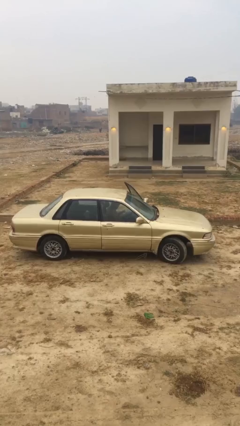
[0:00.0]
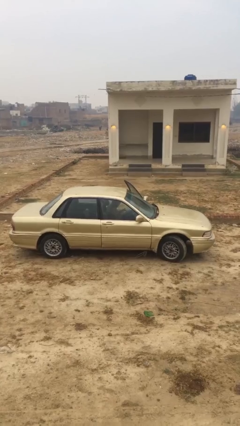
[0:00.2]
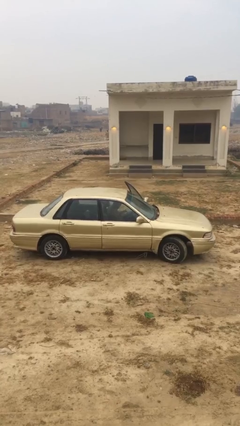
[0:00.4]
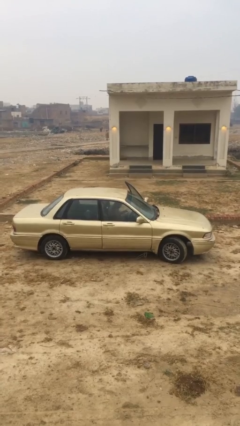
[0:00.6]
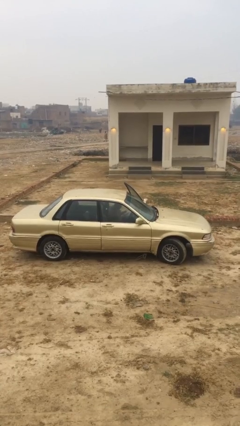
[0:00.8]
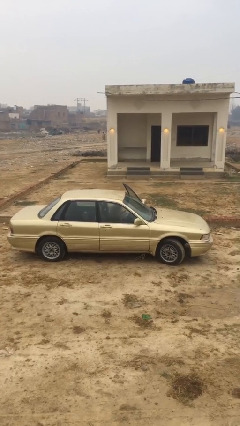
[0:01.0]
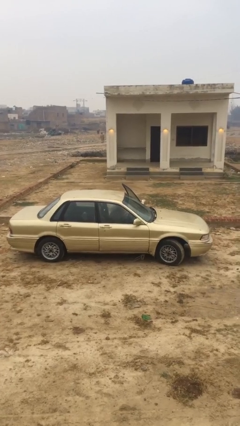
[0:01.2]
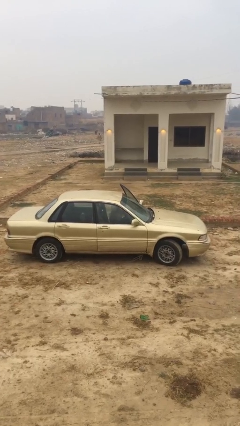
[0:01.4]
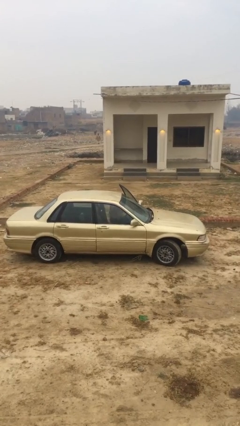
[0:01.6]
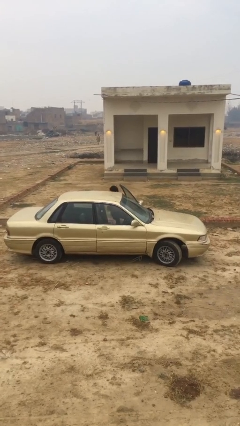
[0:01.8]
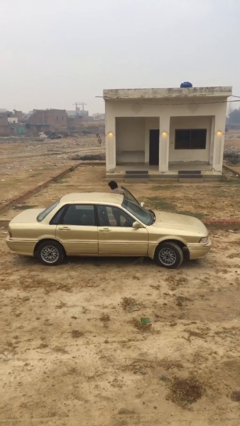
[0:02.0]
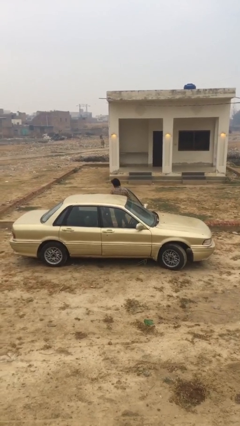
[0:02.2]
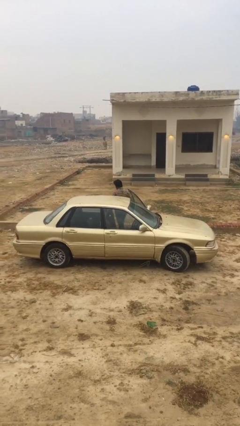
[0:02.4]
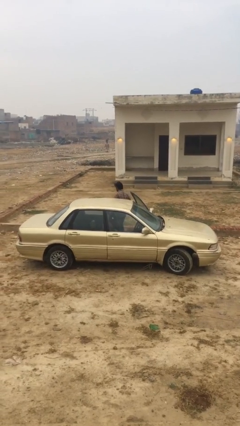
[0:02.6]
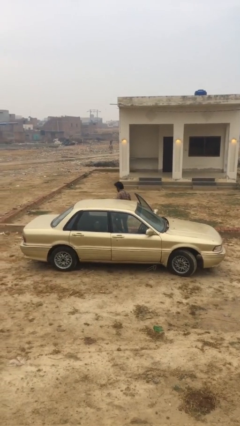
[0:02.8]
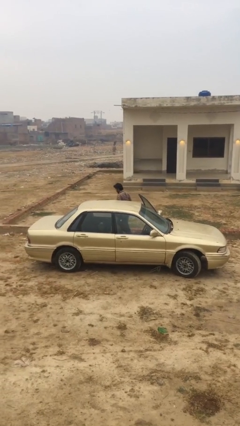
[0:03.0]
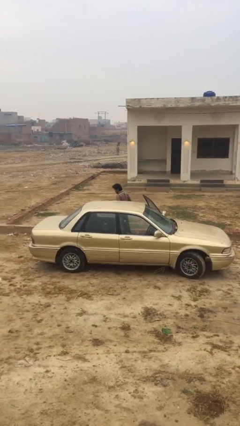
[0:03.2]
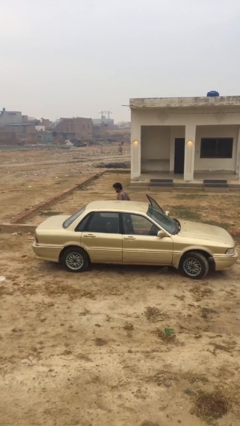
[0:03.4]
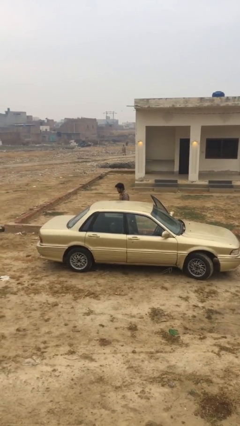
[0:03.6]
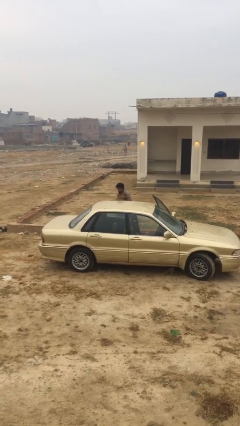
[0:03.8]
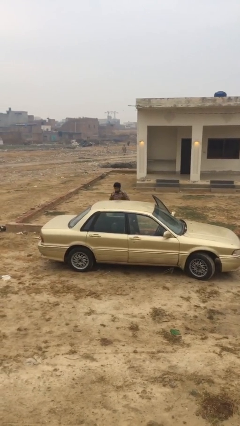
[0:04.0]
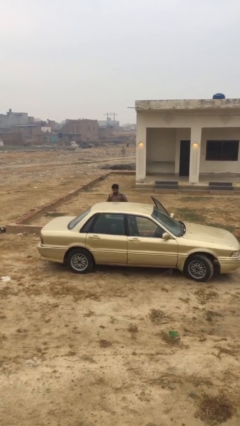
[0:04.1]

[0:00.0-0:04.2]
person exits car

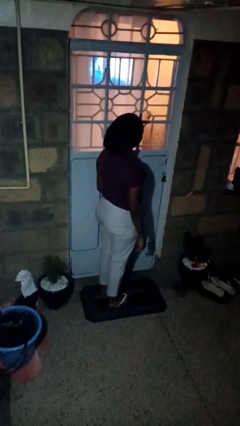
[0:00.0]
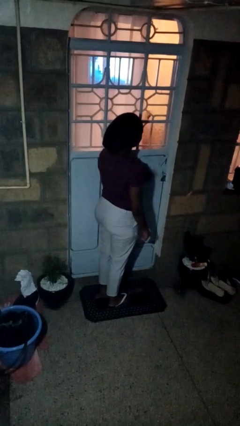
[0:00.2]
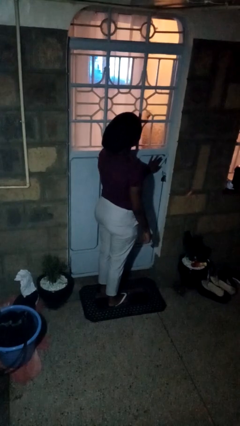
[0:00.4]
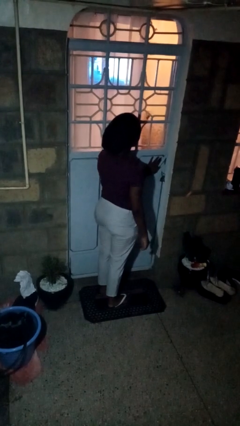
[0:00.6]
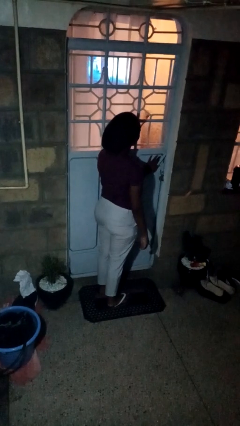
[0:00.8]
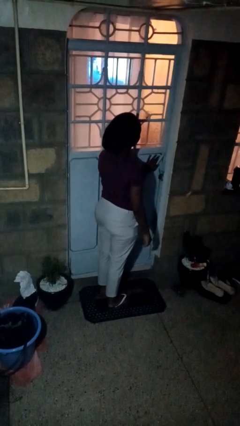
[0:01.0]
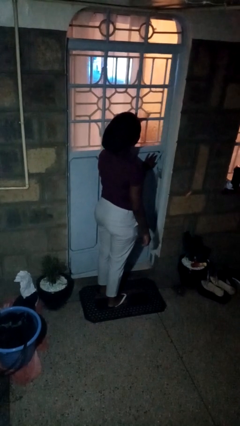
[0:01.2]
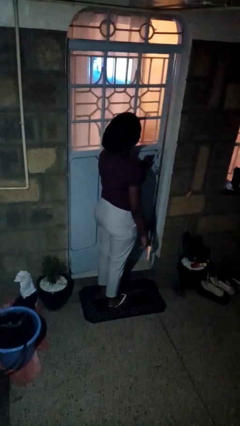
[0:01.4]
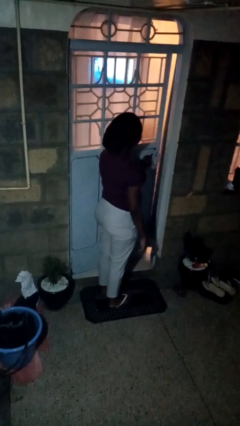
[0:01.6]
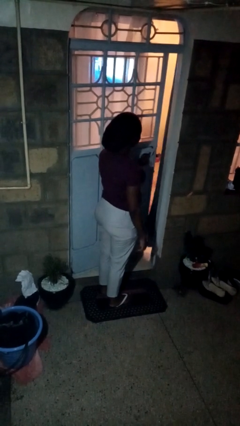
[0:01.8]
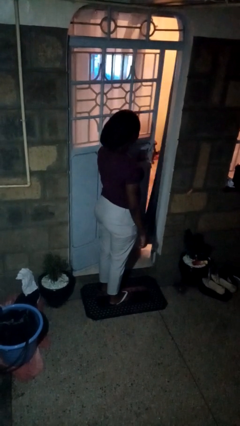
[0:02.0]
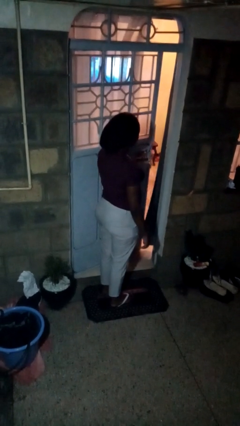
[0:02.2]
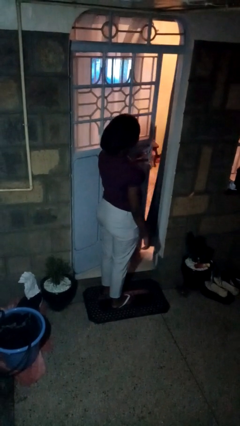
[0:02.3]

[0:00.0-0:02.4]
person opens facility door

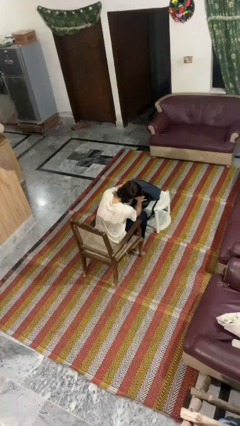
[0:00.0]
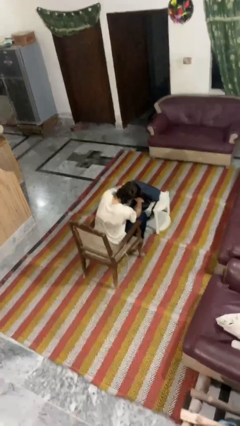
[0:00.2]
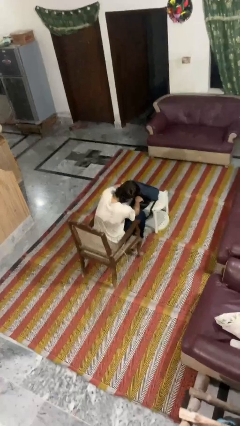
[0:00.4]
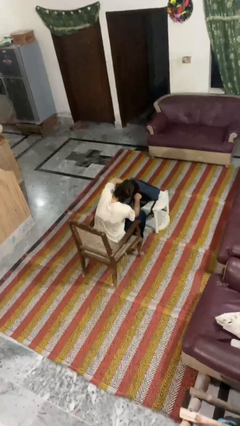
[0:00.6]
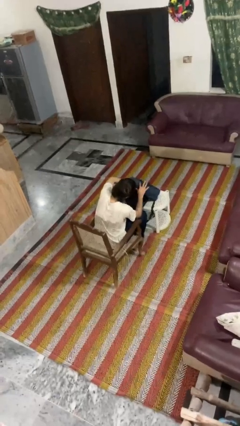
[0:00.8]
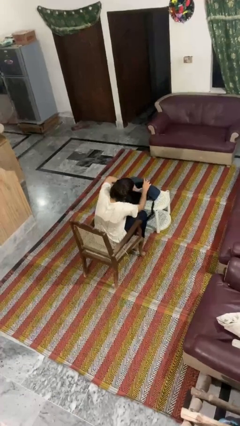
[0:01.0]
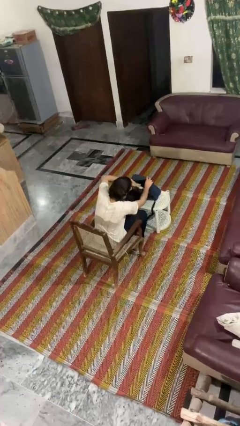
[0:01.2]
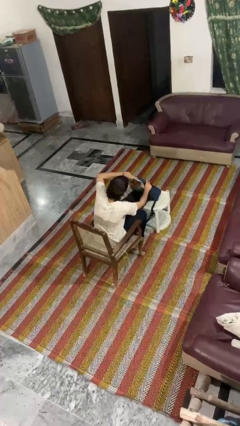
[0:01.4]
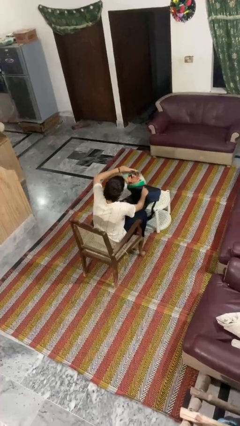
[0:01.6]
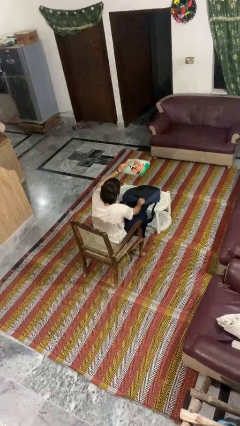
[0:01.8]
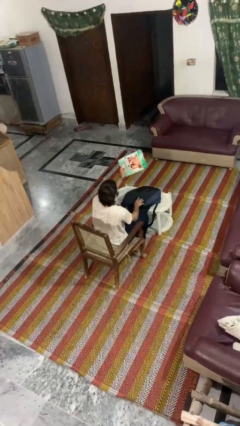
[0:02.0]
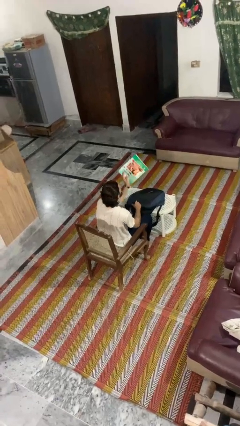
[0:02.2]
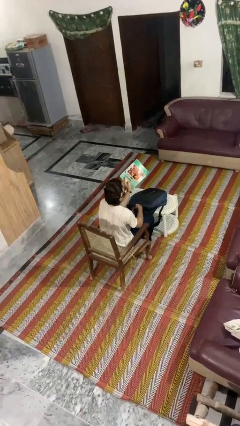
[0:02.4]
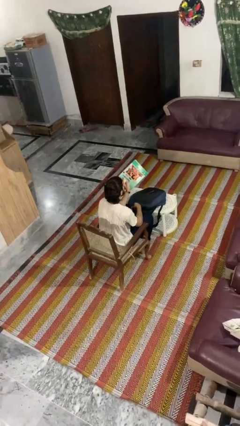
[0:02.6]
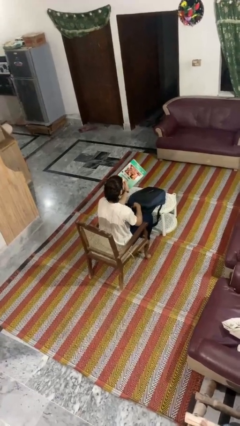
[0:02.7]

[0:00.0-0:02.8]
person takes object from backpack

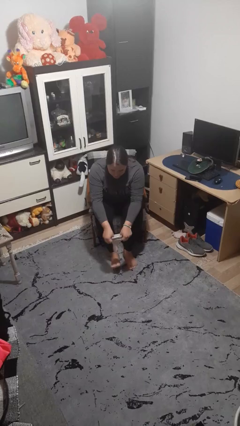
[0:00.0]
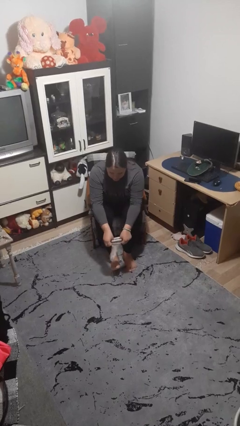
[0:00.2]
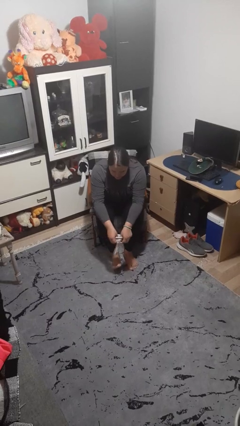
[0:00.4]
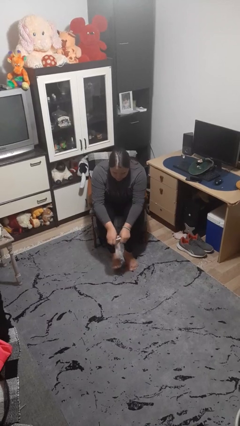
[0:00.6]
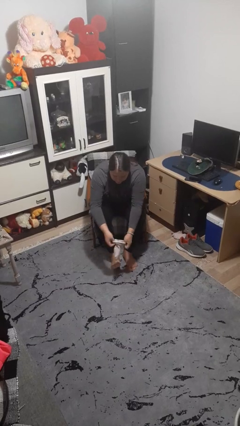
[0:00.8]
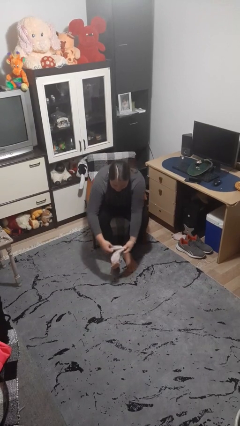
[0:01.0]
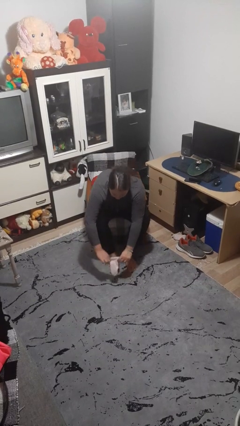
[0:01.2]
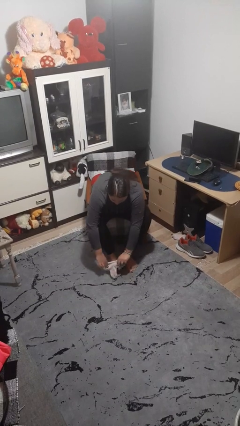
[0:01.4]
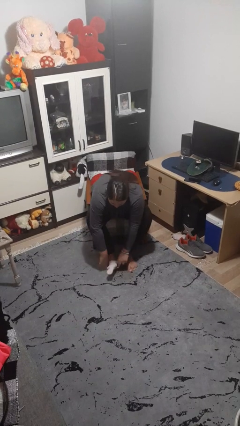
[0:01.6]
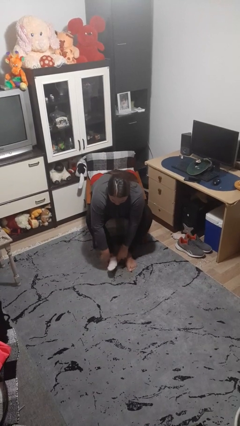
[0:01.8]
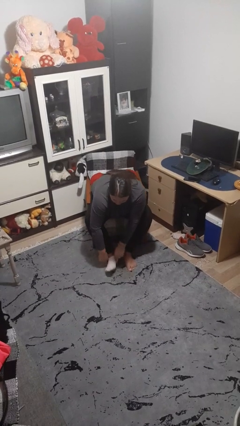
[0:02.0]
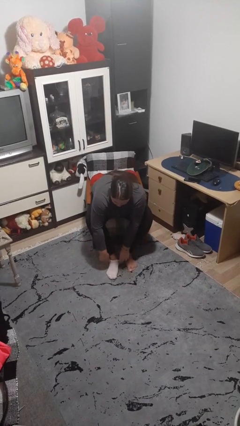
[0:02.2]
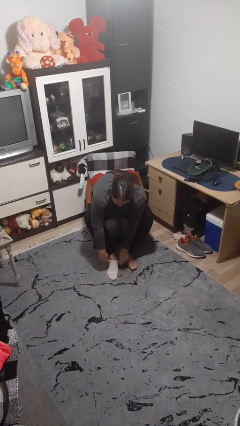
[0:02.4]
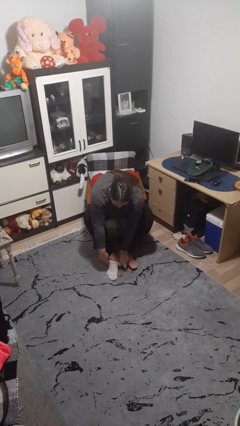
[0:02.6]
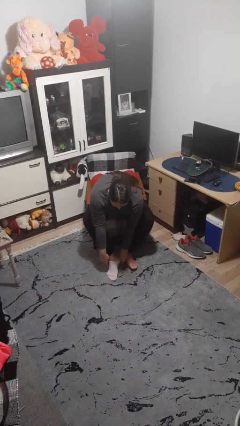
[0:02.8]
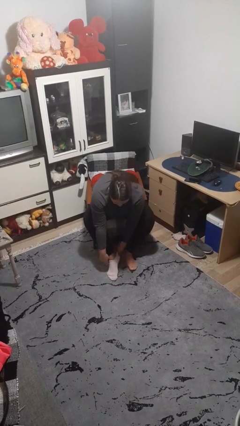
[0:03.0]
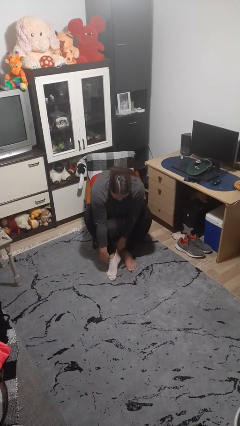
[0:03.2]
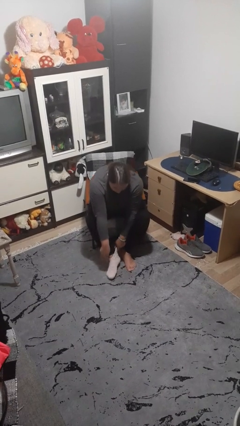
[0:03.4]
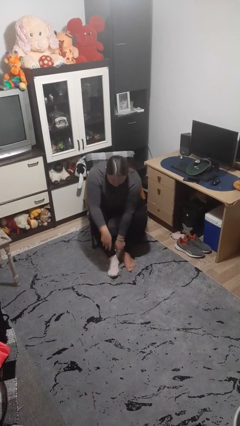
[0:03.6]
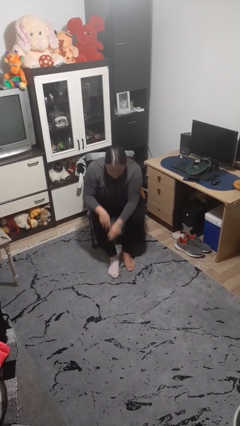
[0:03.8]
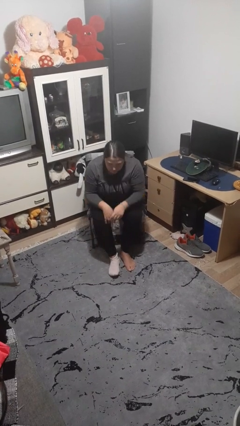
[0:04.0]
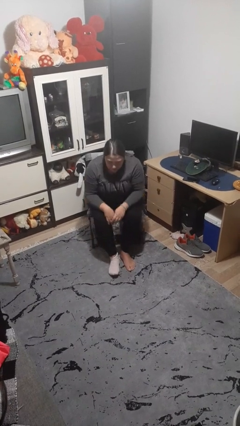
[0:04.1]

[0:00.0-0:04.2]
person puts on socks

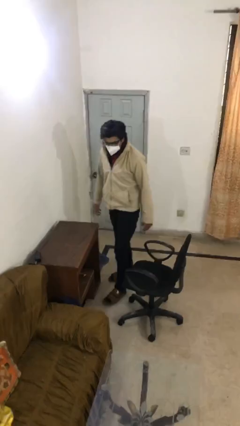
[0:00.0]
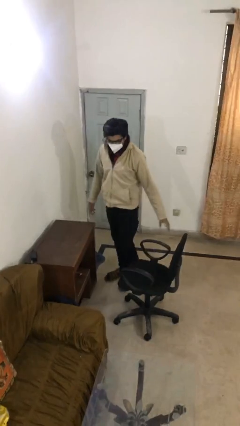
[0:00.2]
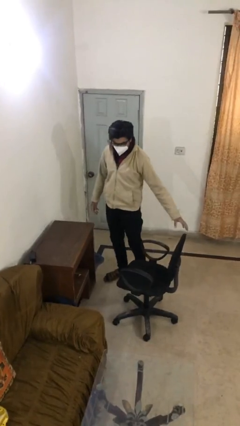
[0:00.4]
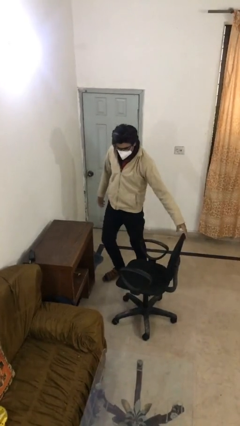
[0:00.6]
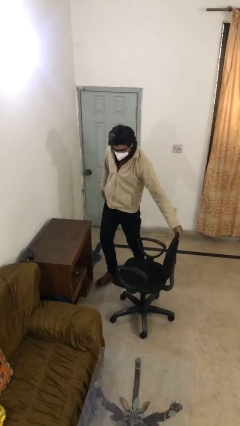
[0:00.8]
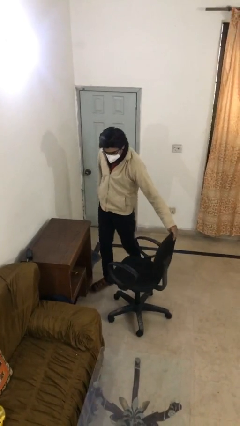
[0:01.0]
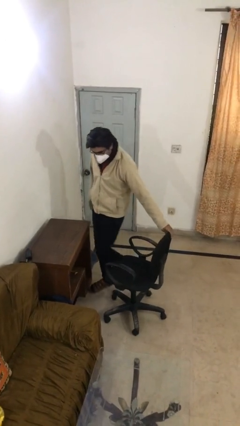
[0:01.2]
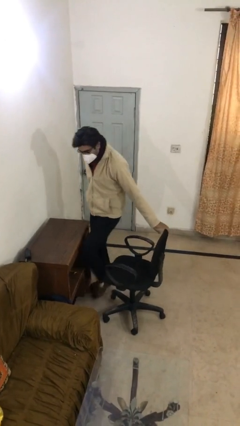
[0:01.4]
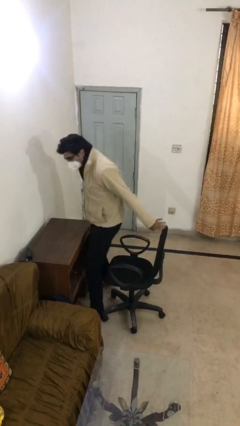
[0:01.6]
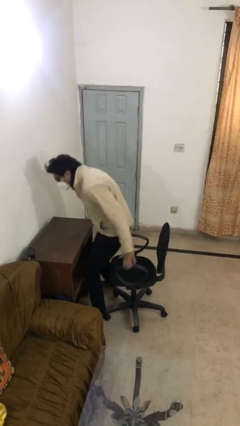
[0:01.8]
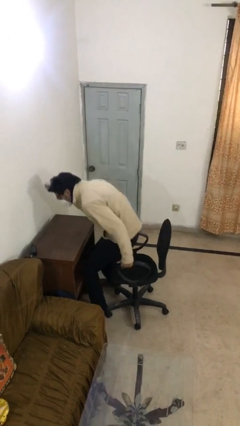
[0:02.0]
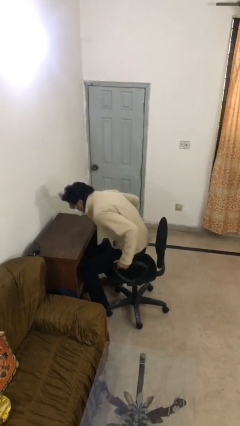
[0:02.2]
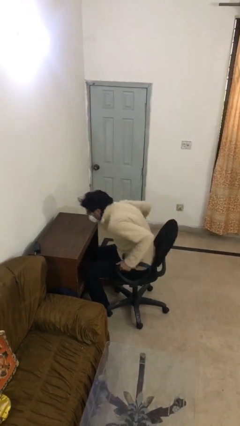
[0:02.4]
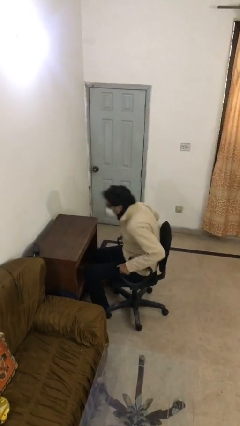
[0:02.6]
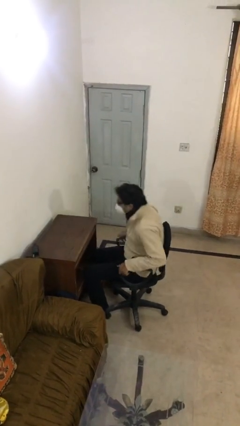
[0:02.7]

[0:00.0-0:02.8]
person sits down

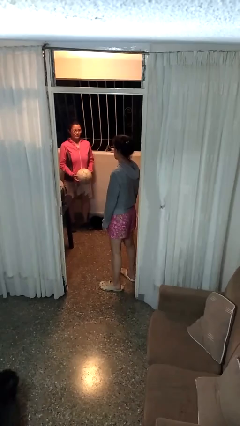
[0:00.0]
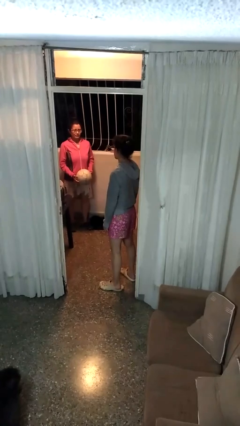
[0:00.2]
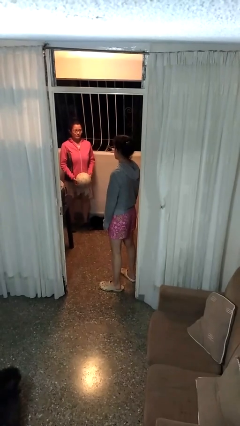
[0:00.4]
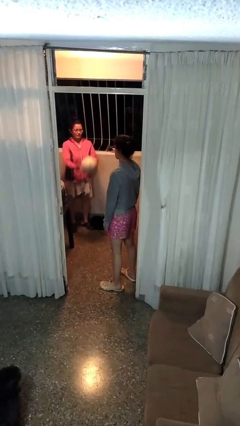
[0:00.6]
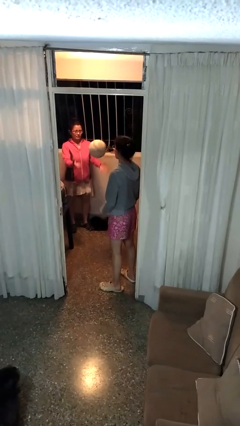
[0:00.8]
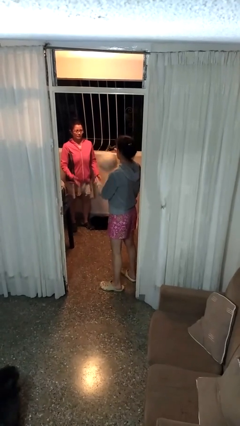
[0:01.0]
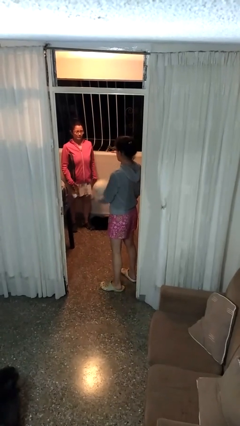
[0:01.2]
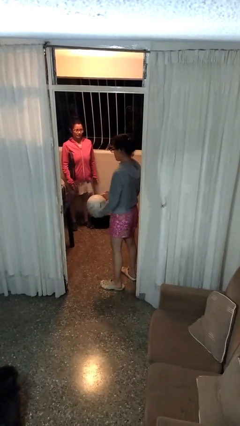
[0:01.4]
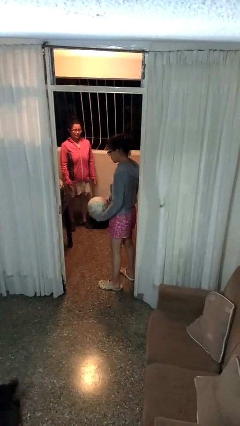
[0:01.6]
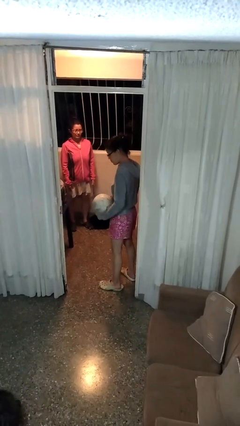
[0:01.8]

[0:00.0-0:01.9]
person catches object from person
